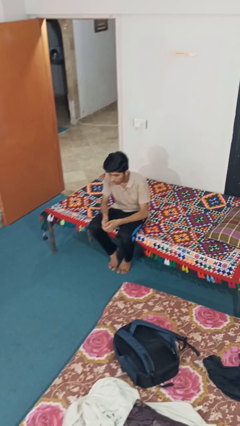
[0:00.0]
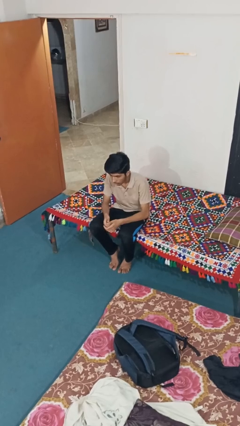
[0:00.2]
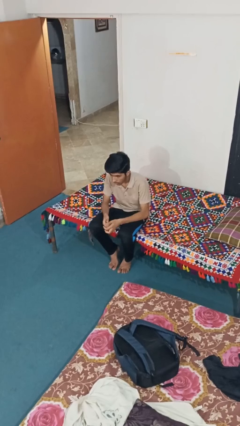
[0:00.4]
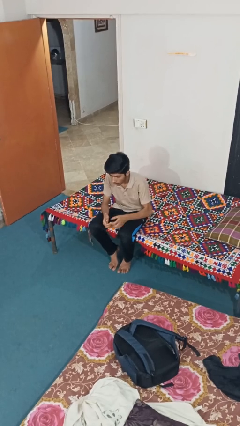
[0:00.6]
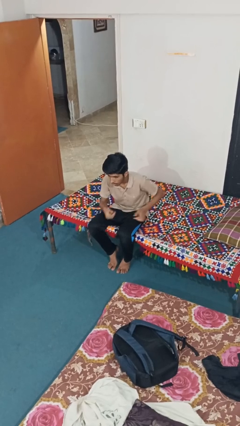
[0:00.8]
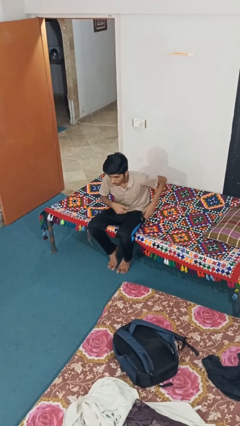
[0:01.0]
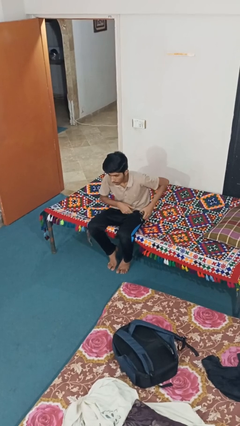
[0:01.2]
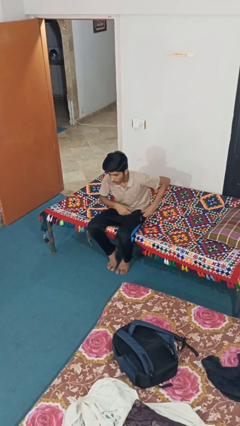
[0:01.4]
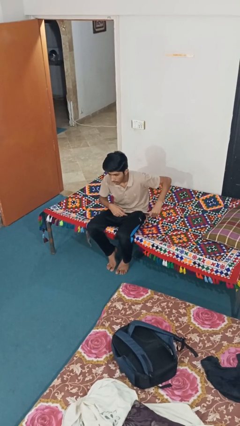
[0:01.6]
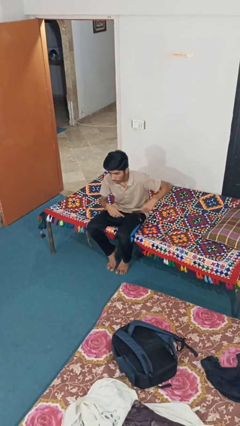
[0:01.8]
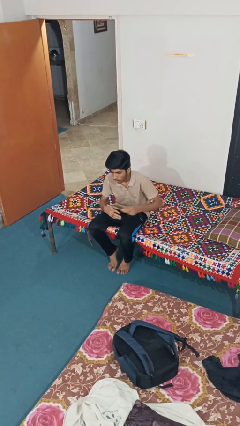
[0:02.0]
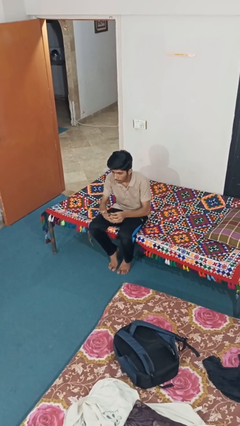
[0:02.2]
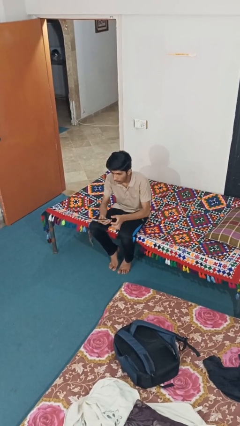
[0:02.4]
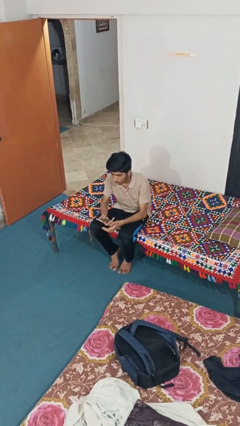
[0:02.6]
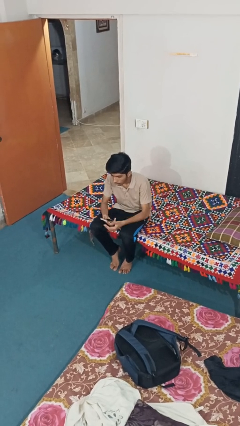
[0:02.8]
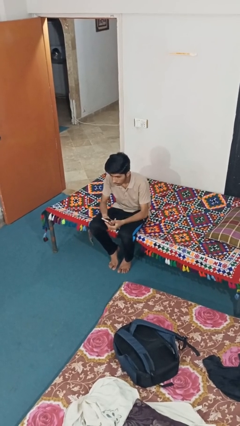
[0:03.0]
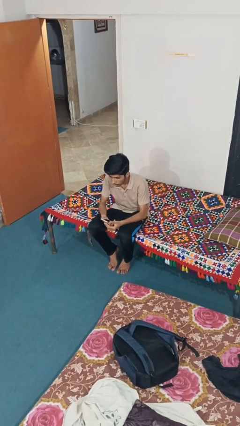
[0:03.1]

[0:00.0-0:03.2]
person takes phone from pocket

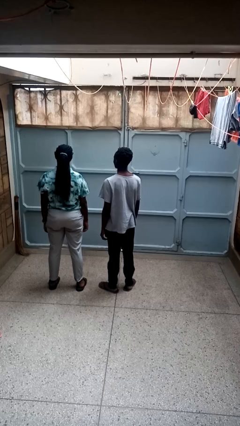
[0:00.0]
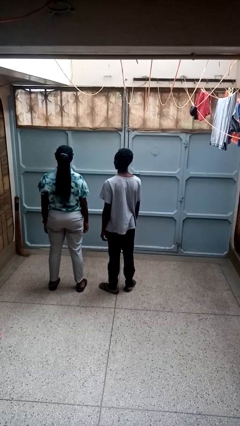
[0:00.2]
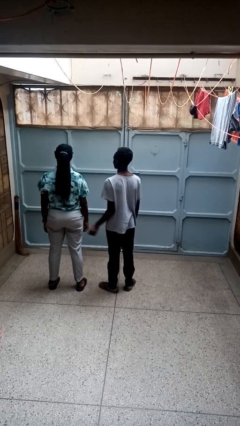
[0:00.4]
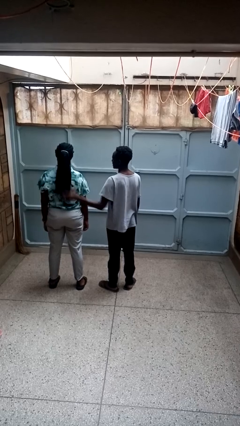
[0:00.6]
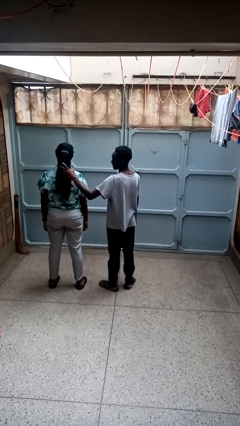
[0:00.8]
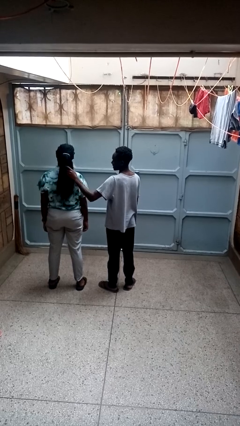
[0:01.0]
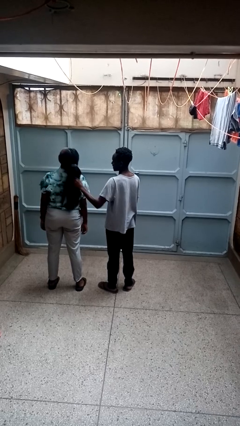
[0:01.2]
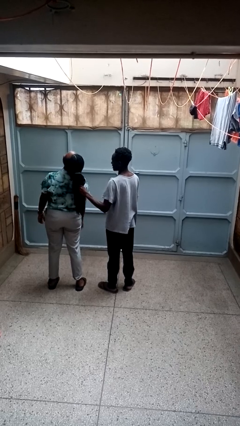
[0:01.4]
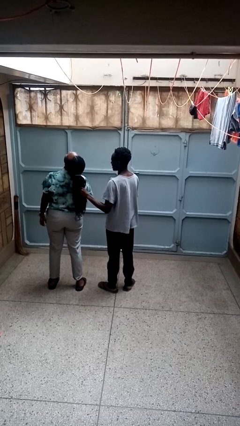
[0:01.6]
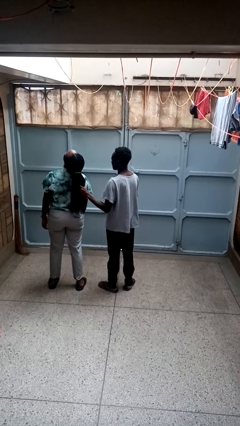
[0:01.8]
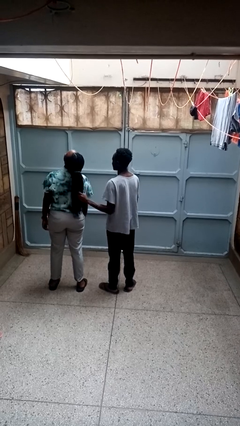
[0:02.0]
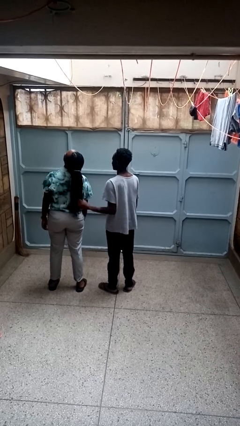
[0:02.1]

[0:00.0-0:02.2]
person grabs person by hair

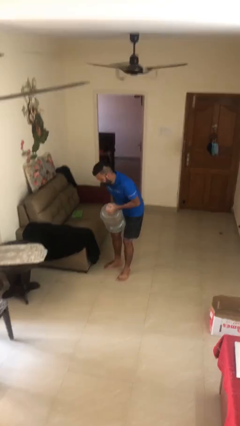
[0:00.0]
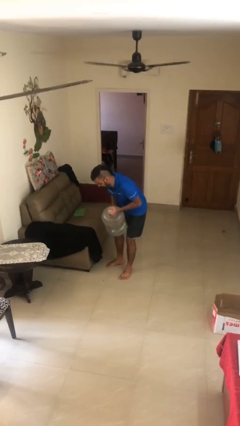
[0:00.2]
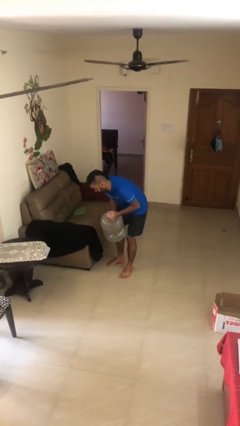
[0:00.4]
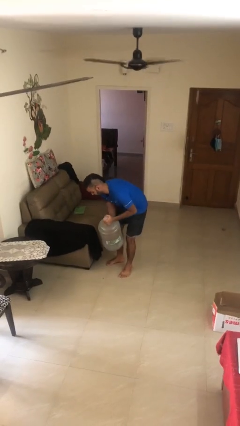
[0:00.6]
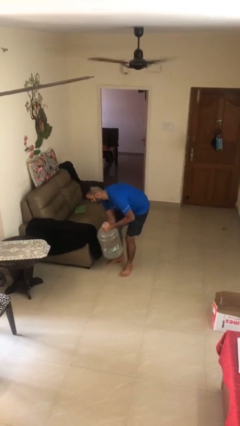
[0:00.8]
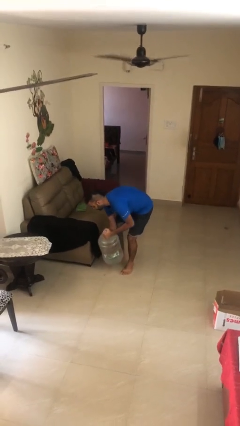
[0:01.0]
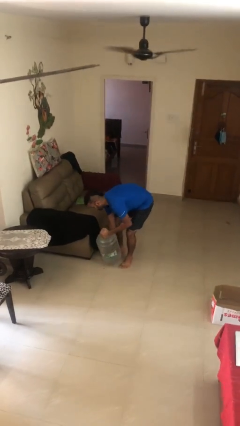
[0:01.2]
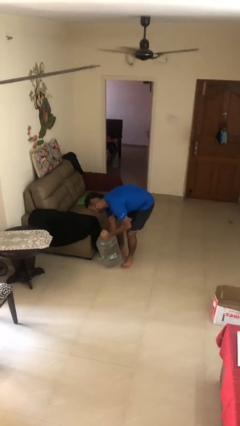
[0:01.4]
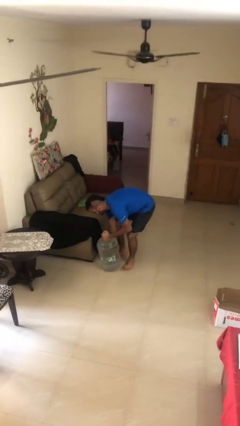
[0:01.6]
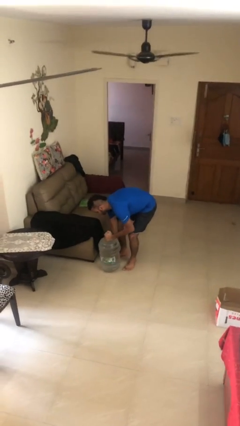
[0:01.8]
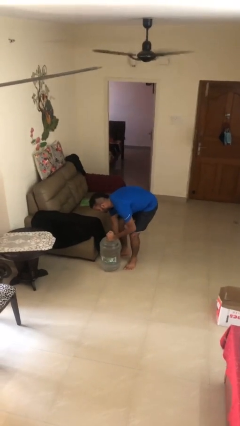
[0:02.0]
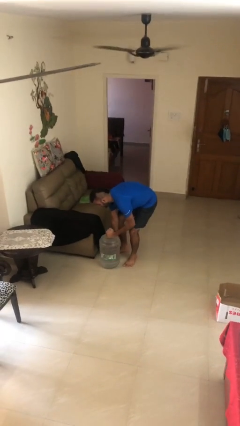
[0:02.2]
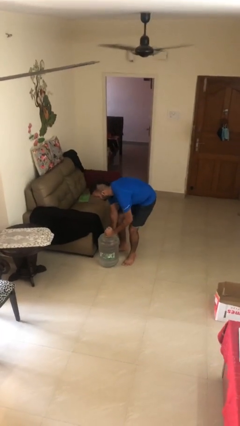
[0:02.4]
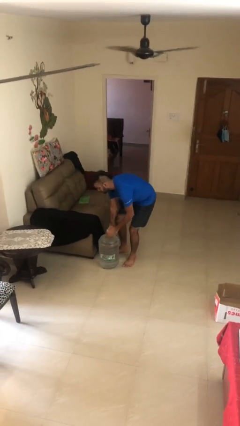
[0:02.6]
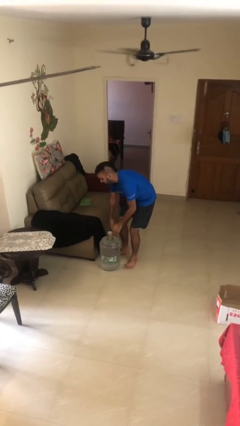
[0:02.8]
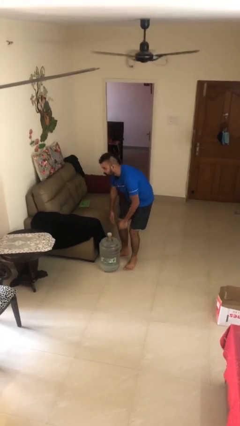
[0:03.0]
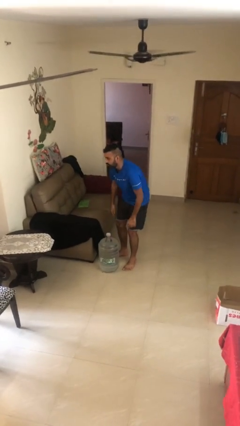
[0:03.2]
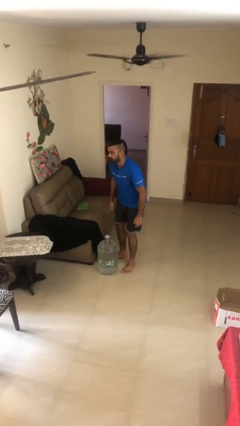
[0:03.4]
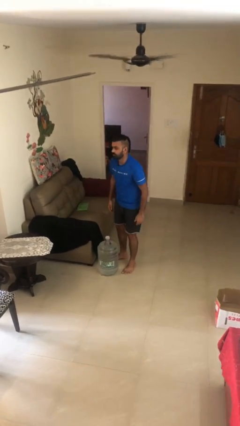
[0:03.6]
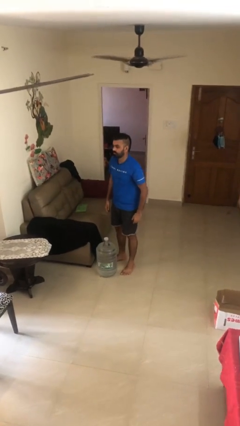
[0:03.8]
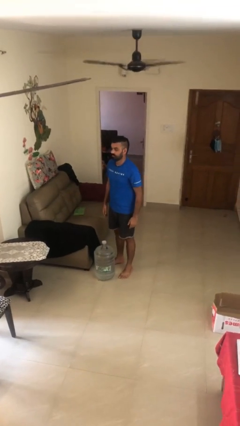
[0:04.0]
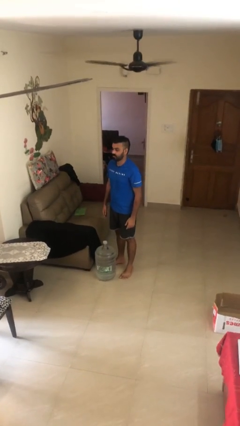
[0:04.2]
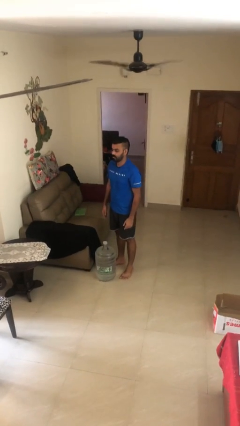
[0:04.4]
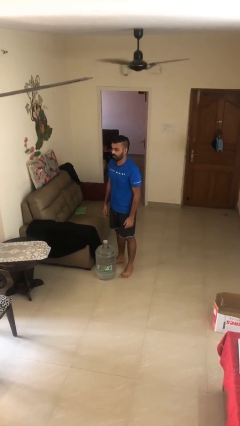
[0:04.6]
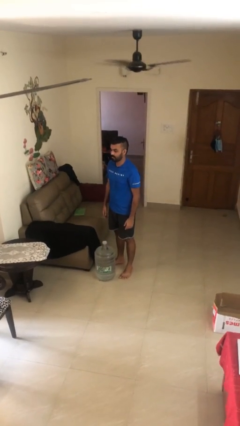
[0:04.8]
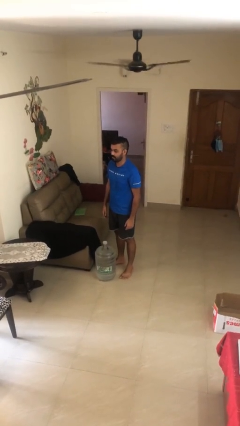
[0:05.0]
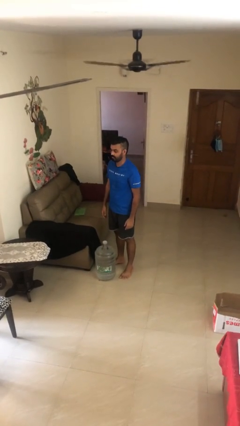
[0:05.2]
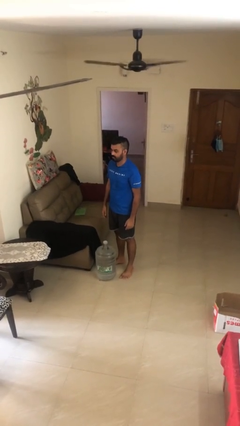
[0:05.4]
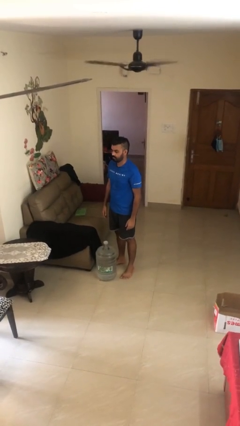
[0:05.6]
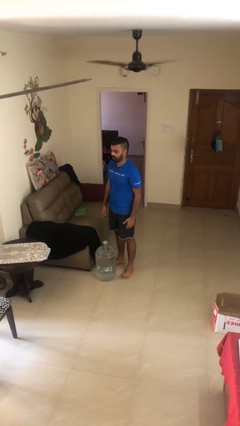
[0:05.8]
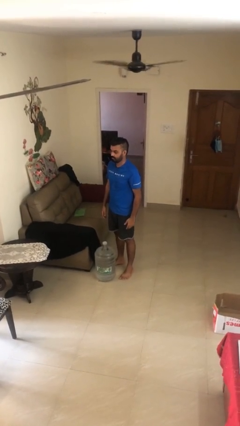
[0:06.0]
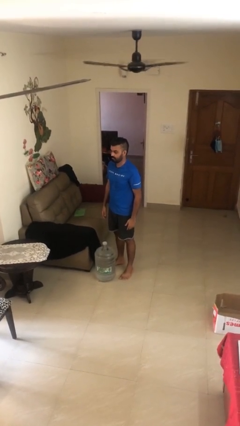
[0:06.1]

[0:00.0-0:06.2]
person puts down object on floor

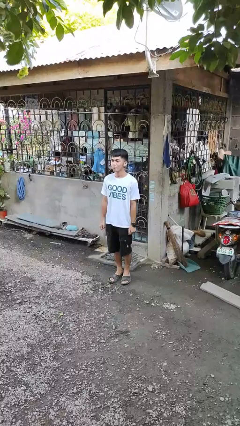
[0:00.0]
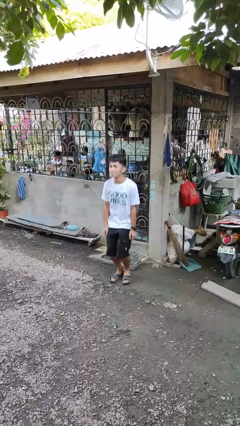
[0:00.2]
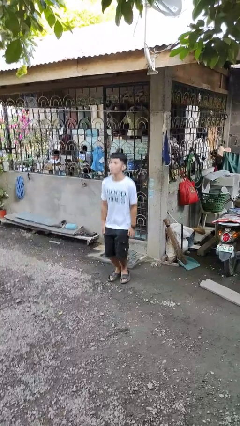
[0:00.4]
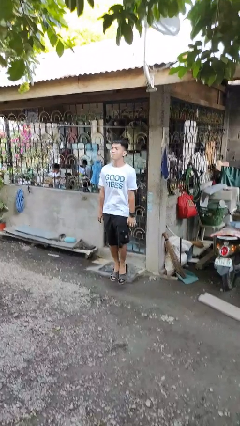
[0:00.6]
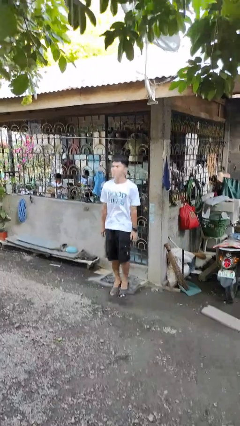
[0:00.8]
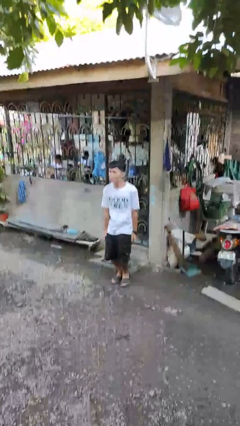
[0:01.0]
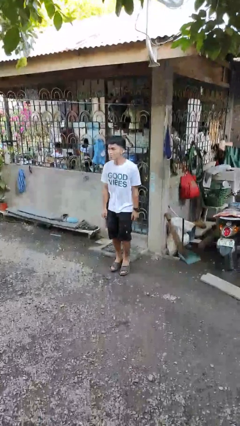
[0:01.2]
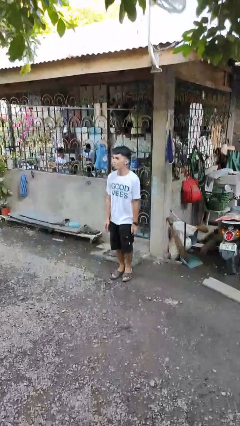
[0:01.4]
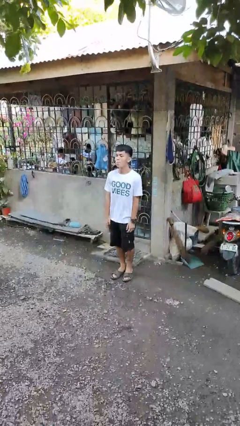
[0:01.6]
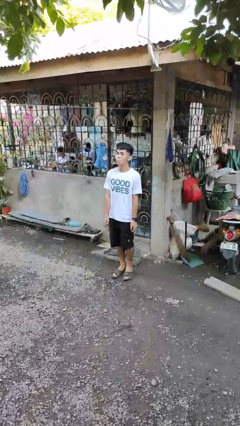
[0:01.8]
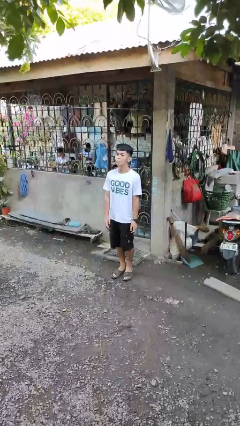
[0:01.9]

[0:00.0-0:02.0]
person jumps

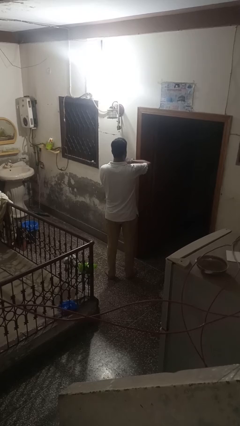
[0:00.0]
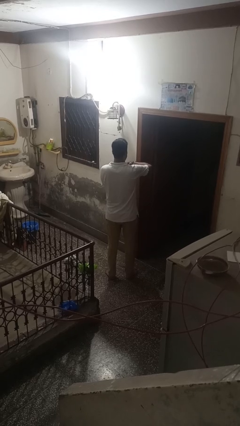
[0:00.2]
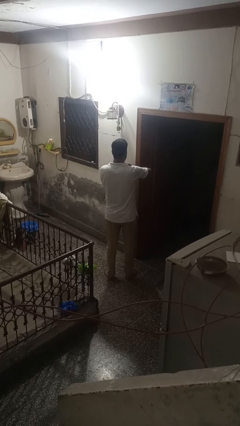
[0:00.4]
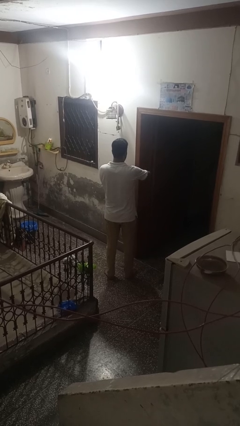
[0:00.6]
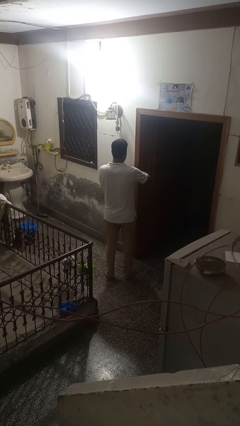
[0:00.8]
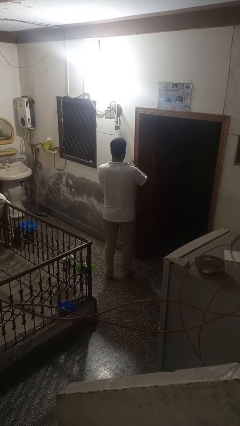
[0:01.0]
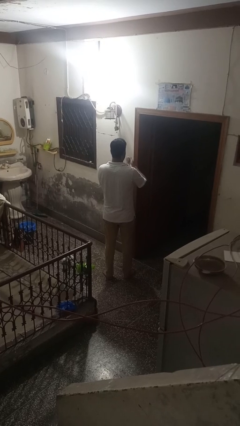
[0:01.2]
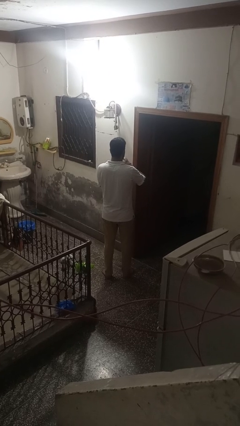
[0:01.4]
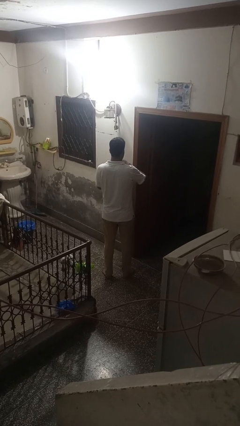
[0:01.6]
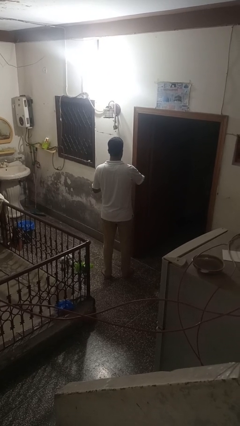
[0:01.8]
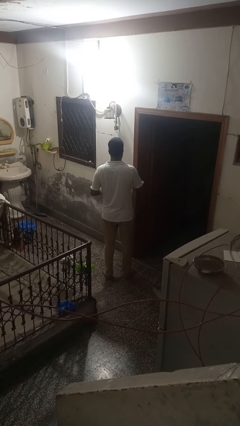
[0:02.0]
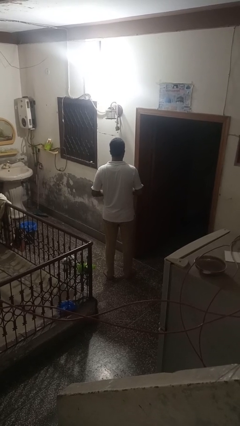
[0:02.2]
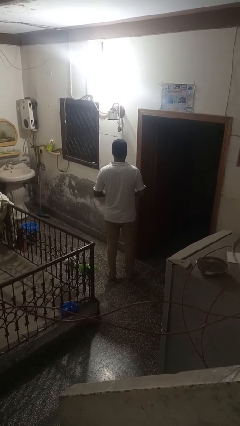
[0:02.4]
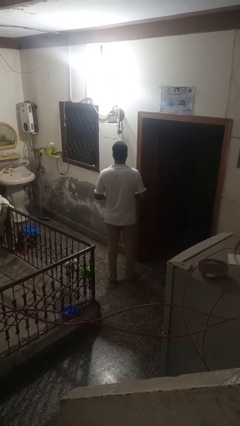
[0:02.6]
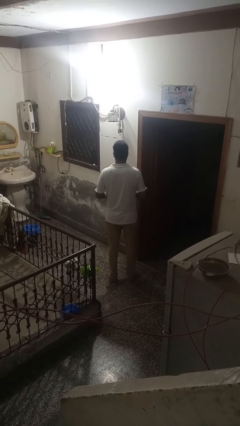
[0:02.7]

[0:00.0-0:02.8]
person takes off wristwatch

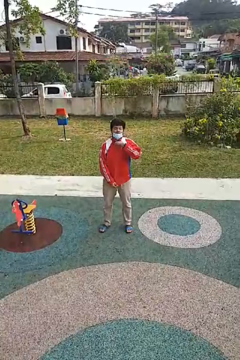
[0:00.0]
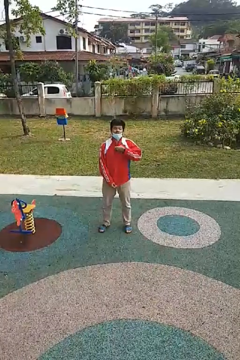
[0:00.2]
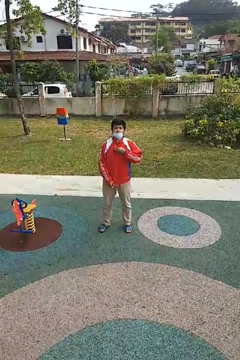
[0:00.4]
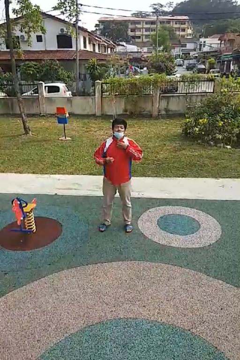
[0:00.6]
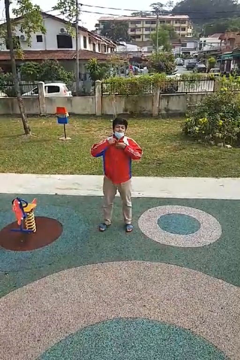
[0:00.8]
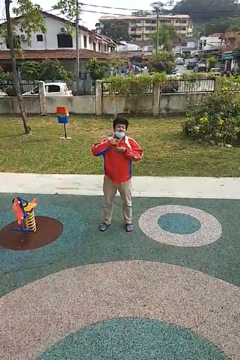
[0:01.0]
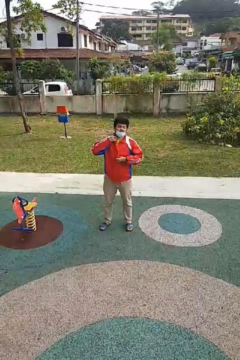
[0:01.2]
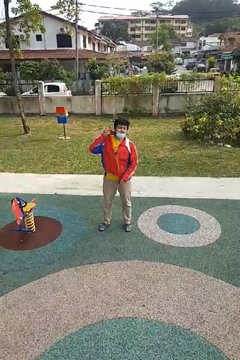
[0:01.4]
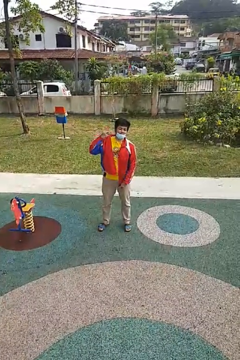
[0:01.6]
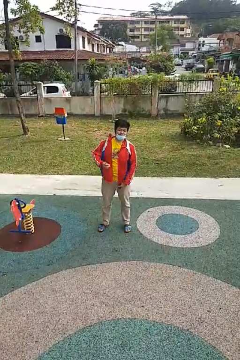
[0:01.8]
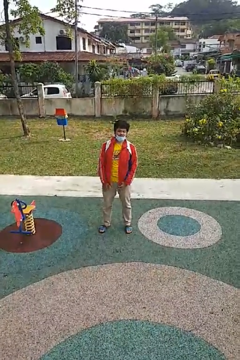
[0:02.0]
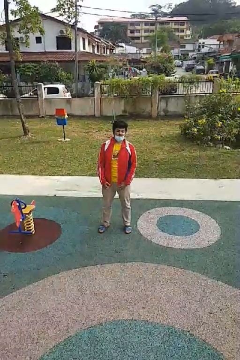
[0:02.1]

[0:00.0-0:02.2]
person unzips jacket
